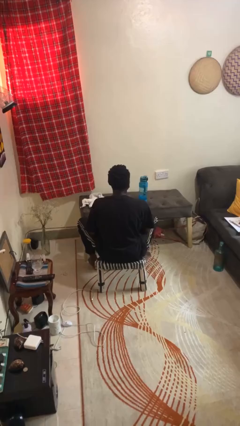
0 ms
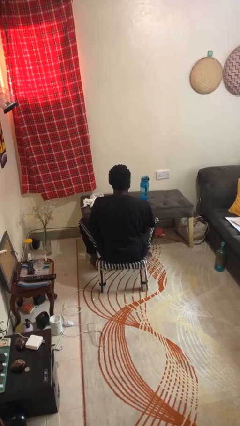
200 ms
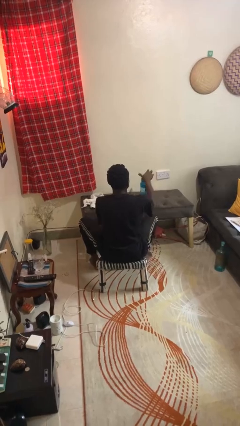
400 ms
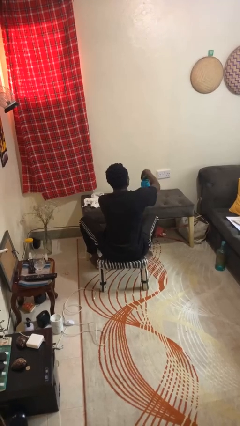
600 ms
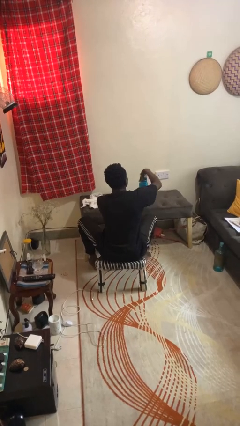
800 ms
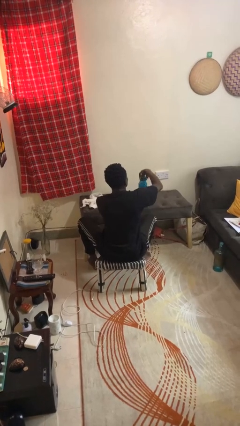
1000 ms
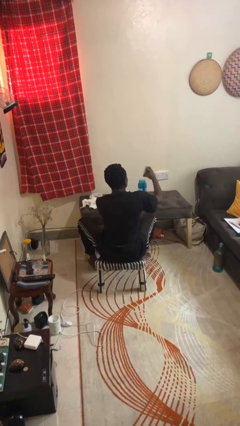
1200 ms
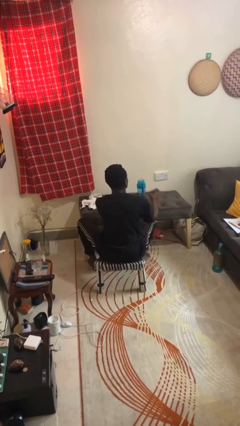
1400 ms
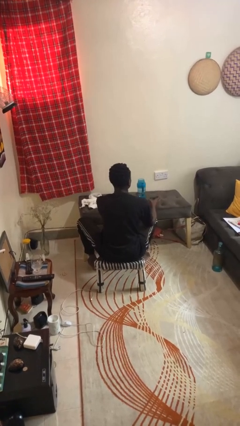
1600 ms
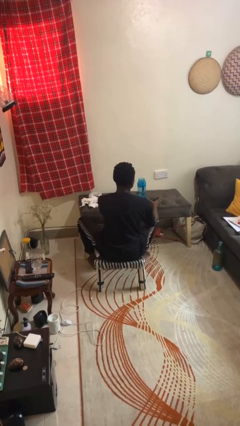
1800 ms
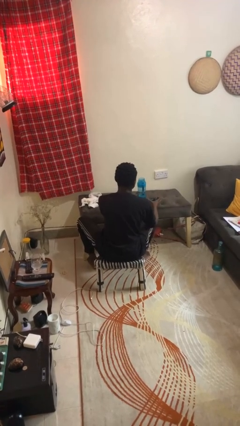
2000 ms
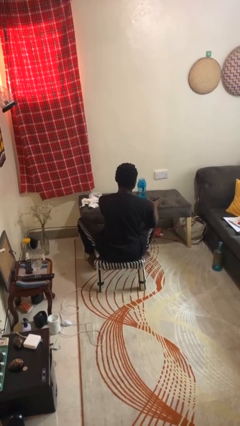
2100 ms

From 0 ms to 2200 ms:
person opens jar

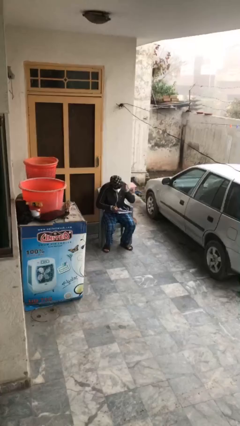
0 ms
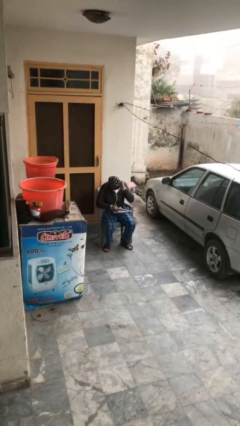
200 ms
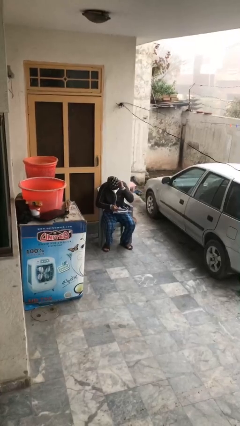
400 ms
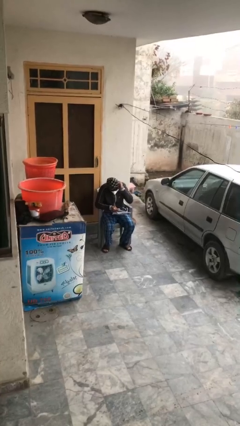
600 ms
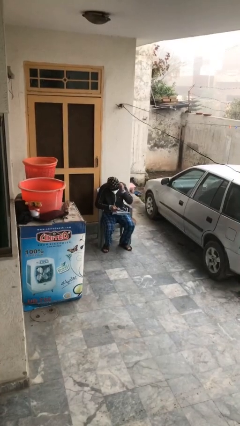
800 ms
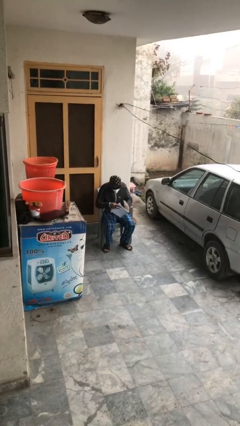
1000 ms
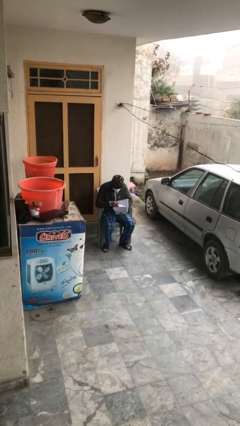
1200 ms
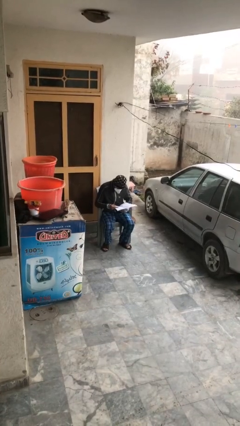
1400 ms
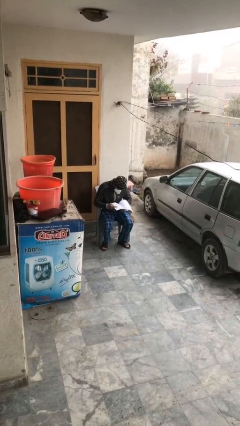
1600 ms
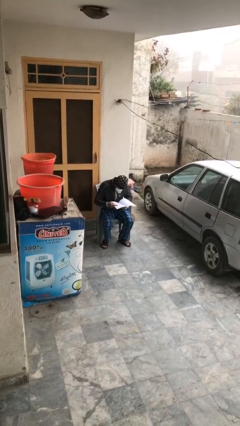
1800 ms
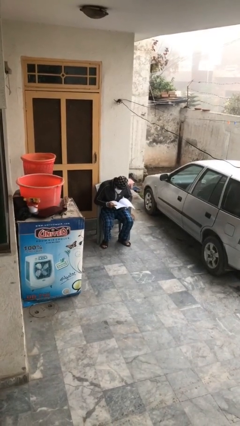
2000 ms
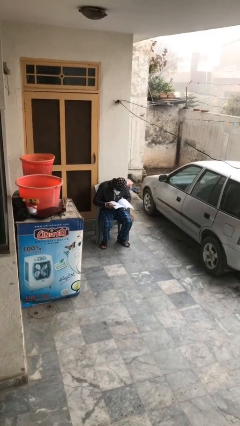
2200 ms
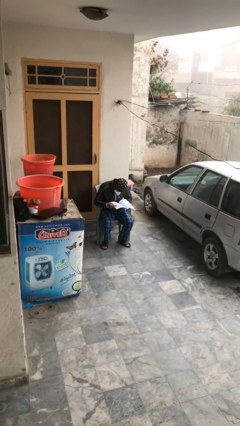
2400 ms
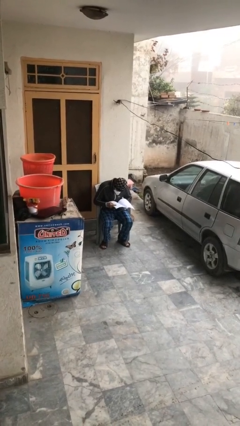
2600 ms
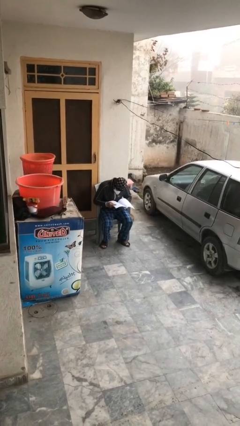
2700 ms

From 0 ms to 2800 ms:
person reads document

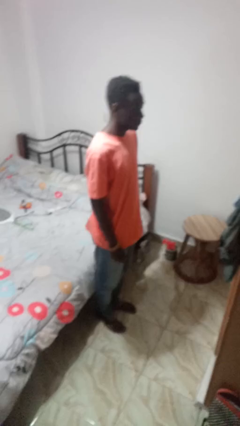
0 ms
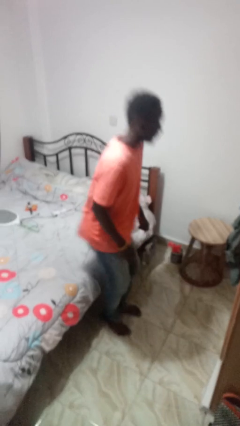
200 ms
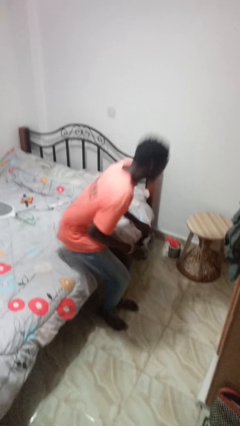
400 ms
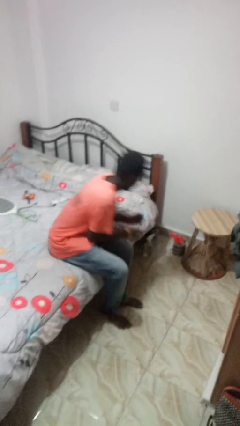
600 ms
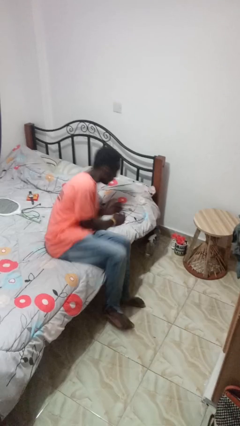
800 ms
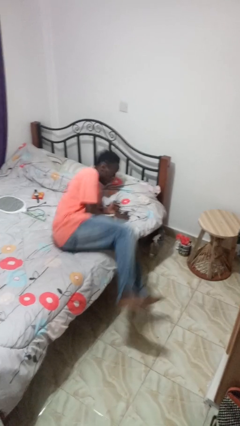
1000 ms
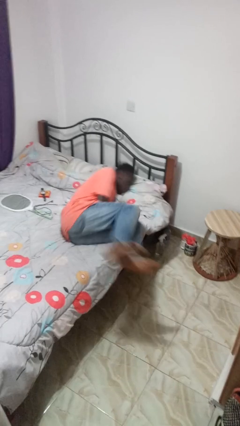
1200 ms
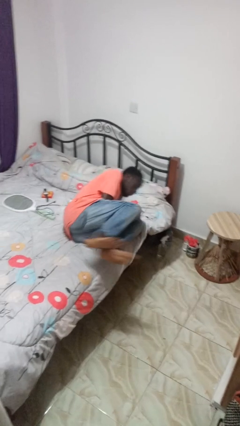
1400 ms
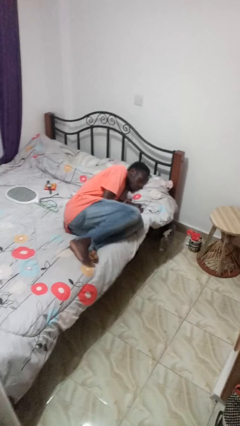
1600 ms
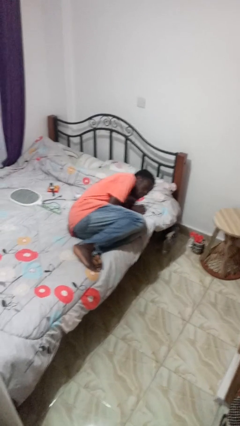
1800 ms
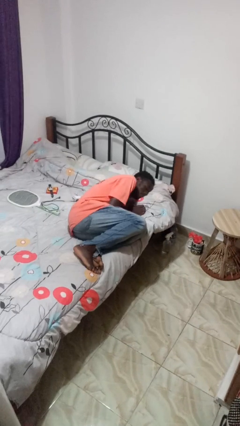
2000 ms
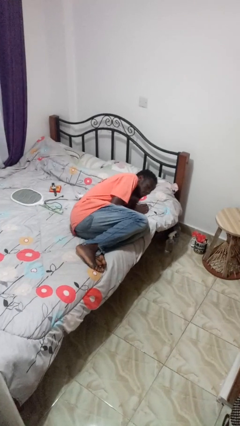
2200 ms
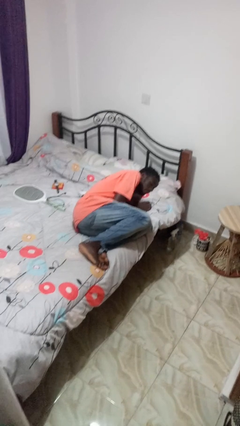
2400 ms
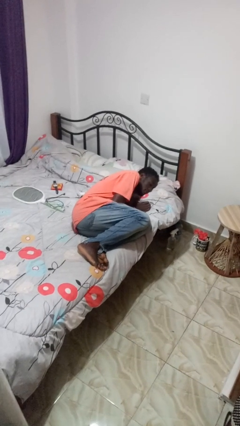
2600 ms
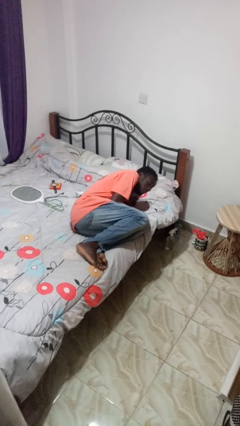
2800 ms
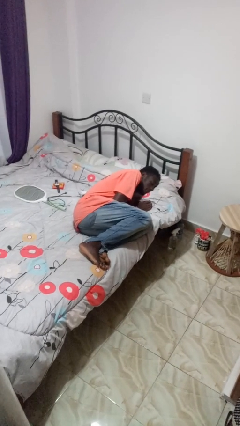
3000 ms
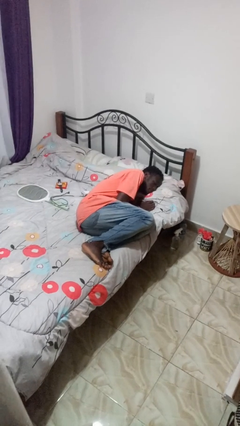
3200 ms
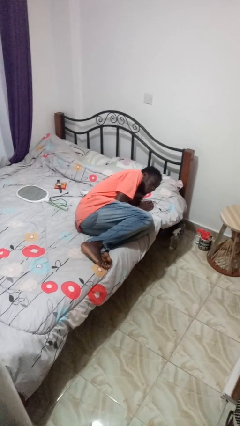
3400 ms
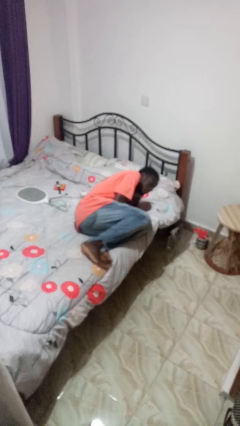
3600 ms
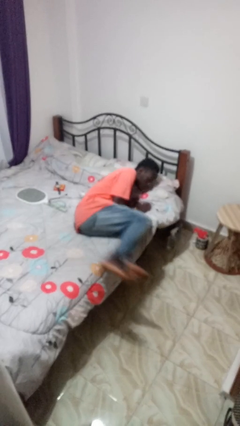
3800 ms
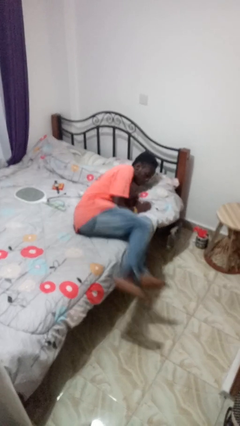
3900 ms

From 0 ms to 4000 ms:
person lies down on bed

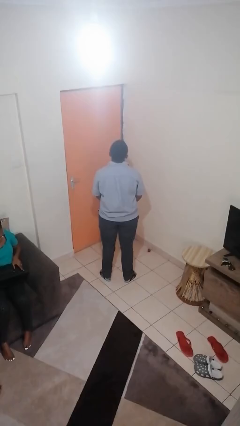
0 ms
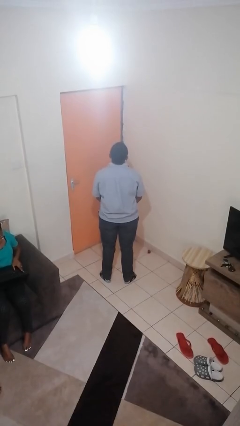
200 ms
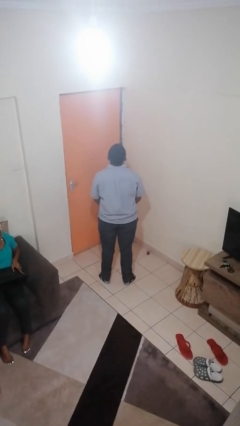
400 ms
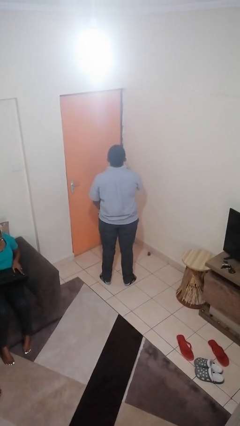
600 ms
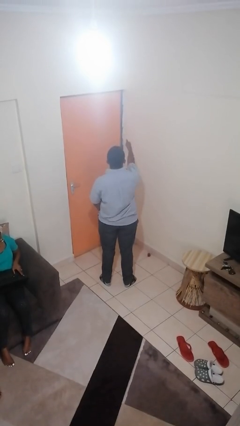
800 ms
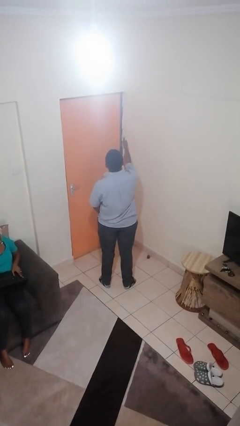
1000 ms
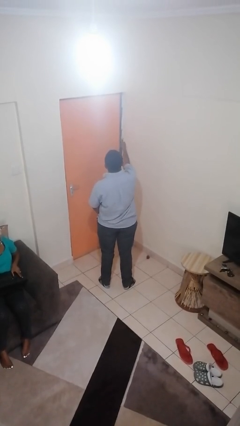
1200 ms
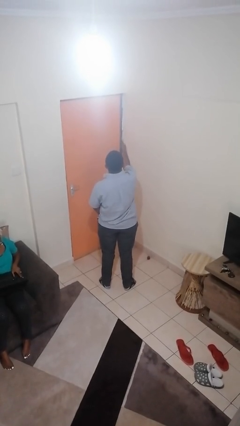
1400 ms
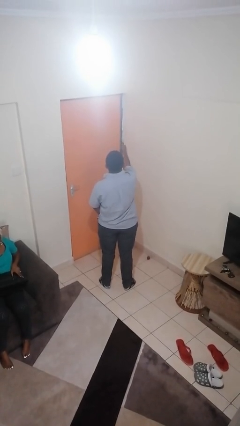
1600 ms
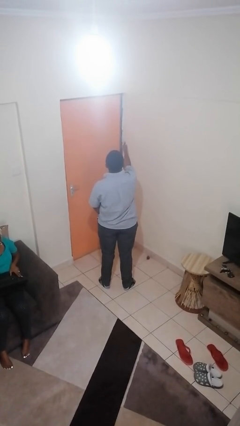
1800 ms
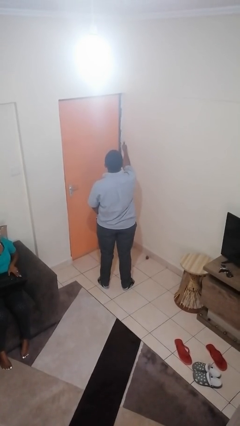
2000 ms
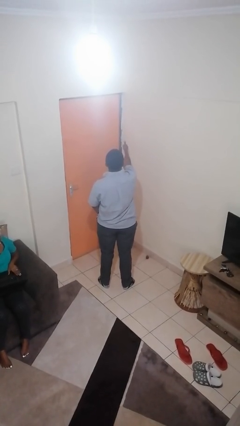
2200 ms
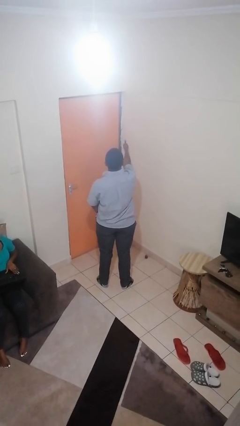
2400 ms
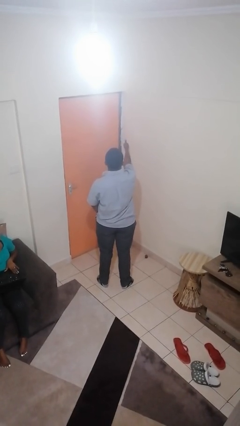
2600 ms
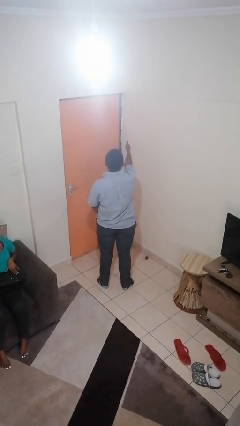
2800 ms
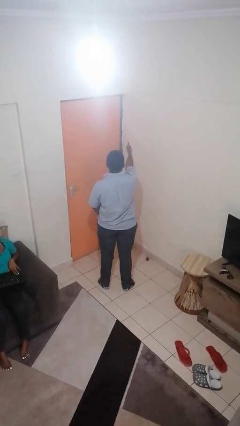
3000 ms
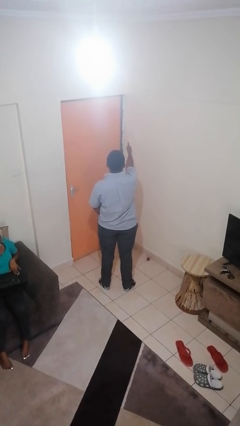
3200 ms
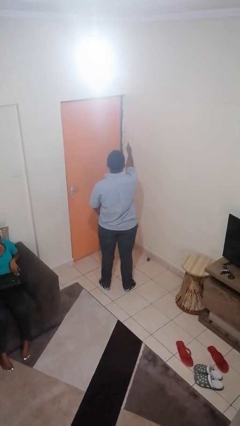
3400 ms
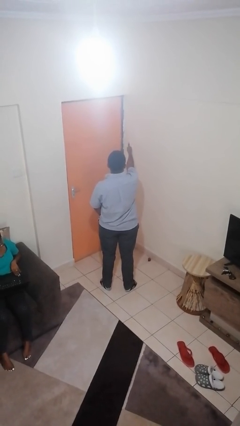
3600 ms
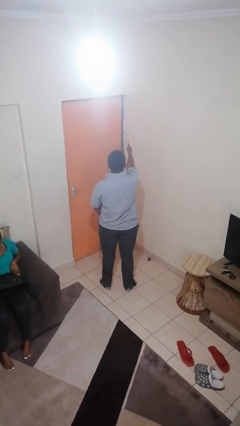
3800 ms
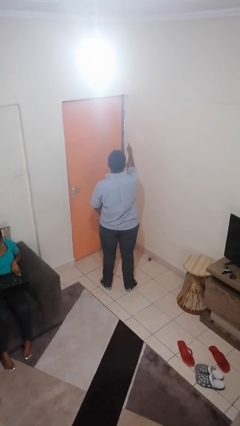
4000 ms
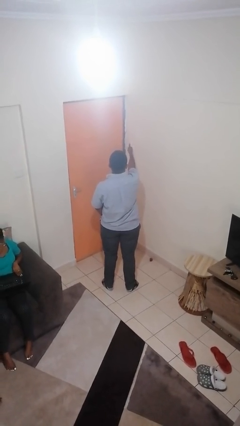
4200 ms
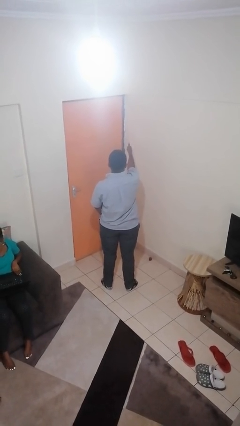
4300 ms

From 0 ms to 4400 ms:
person gestures thumbs up

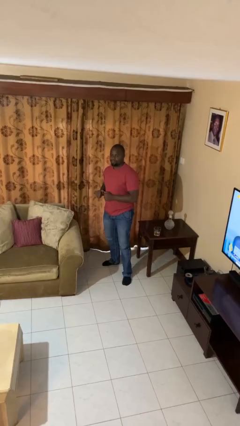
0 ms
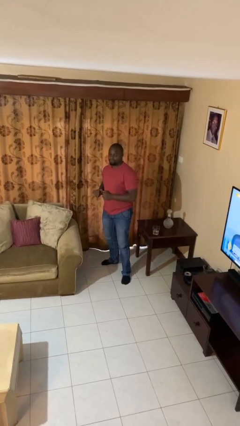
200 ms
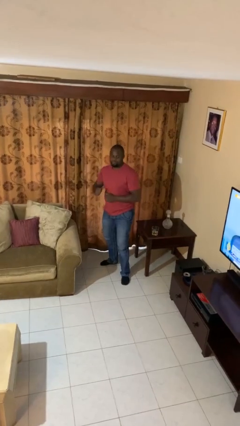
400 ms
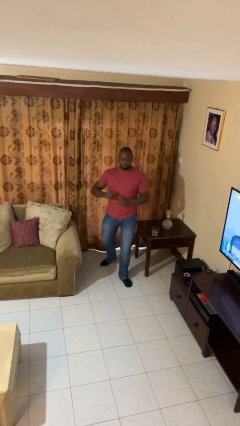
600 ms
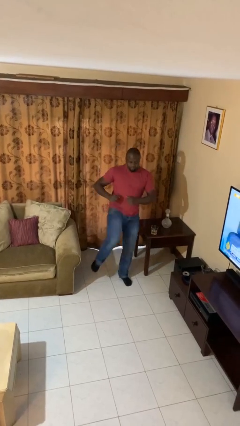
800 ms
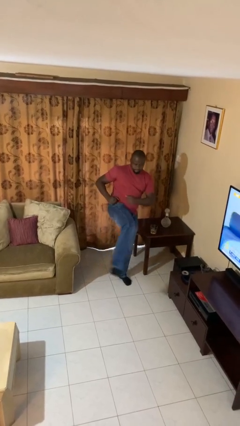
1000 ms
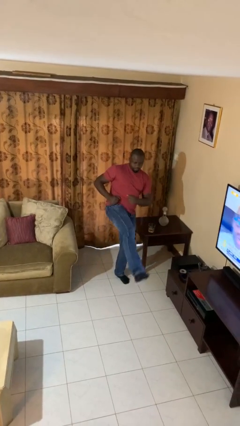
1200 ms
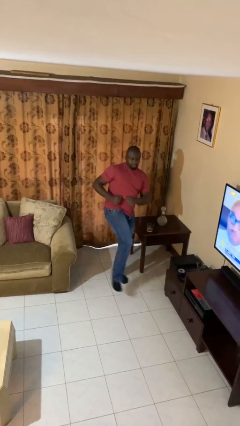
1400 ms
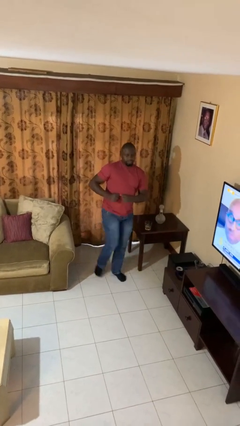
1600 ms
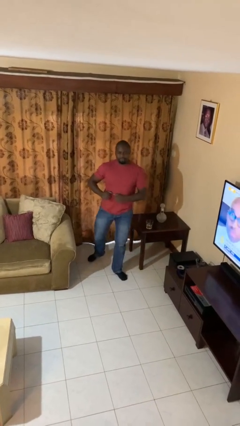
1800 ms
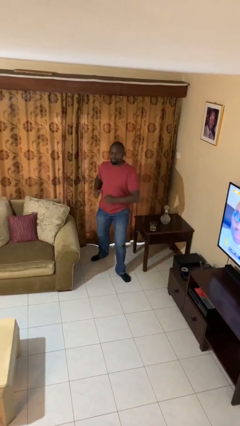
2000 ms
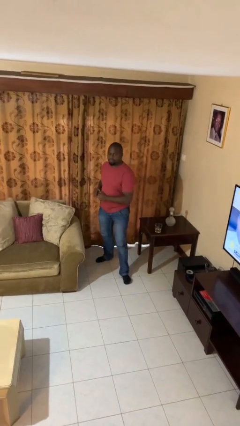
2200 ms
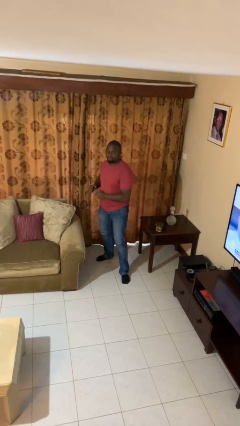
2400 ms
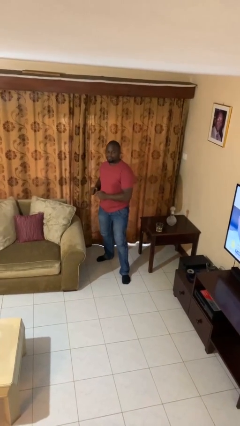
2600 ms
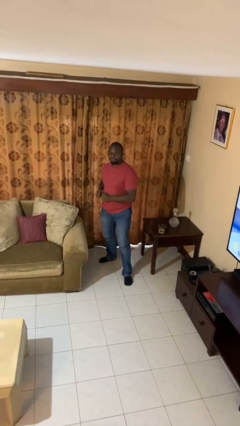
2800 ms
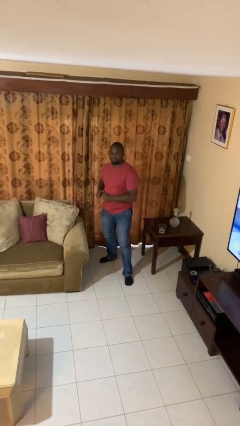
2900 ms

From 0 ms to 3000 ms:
person karate kicks

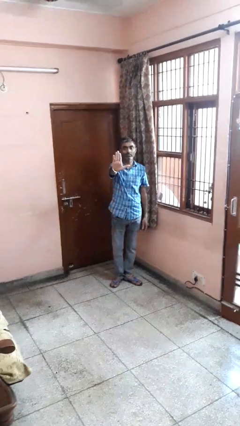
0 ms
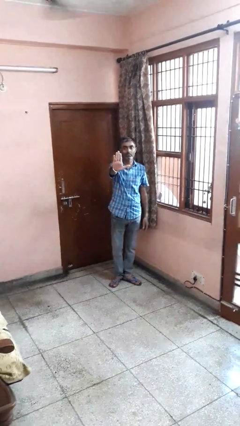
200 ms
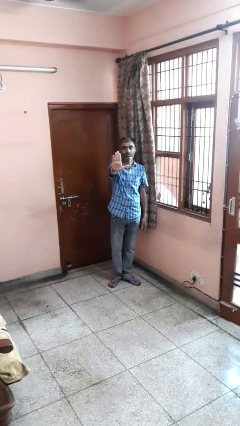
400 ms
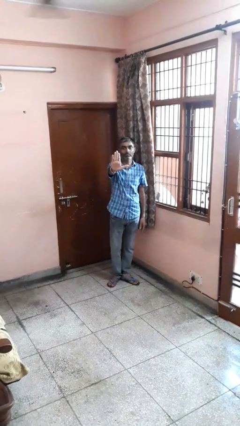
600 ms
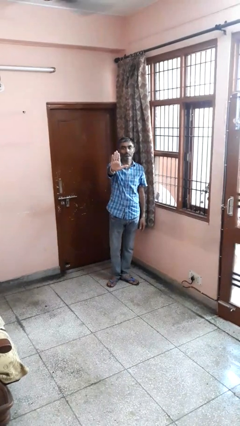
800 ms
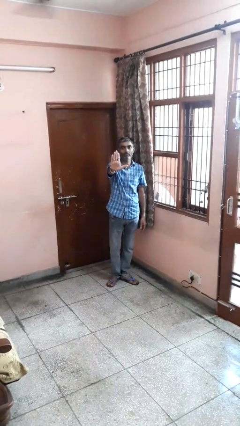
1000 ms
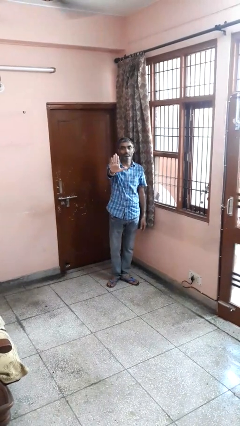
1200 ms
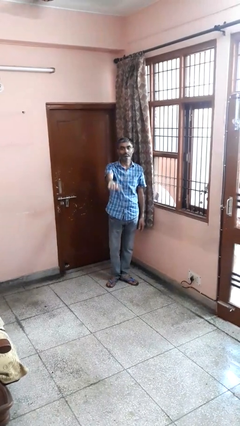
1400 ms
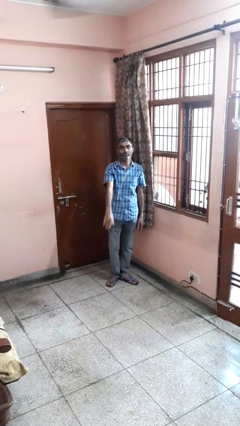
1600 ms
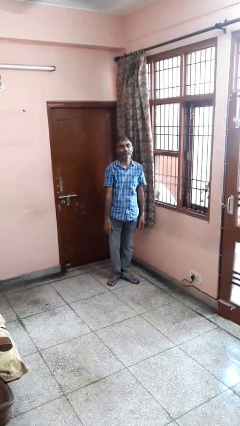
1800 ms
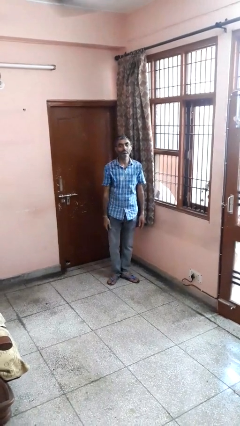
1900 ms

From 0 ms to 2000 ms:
person gestures stop
